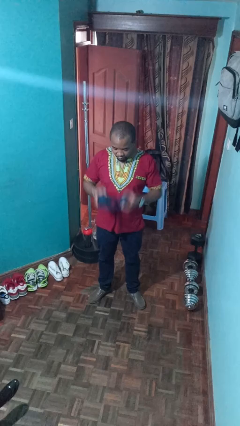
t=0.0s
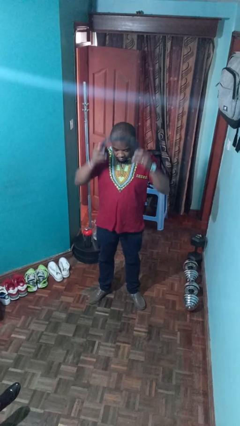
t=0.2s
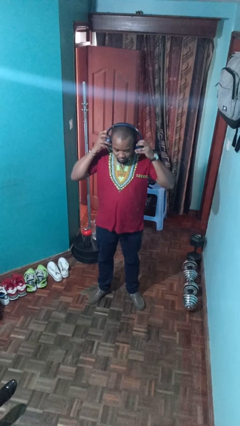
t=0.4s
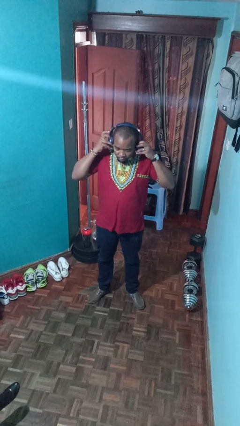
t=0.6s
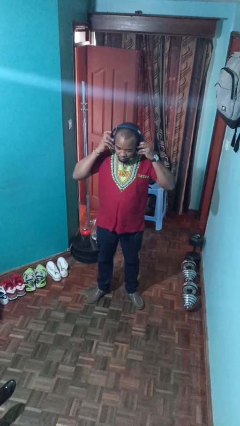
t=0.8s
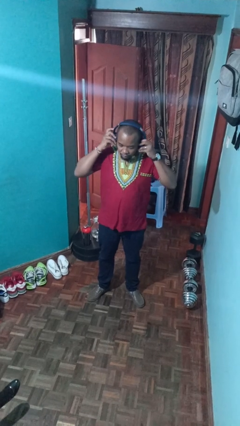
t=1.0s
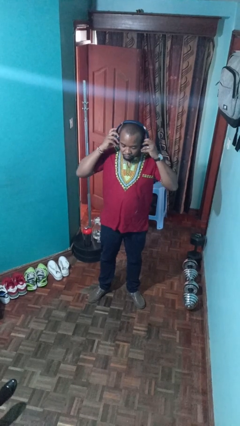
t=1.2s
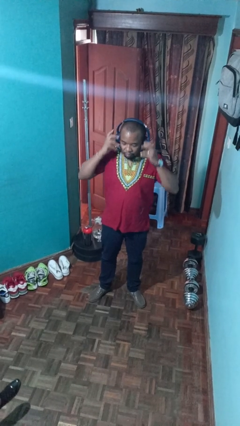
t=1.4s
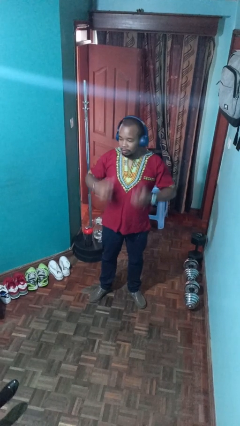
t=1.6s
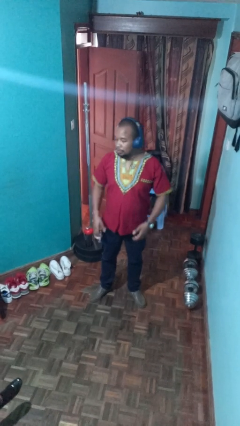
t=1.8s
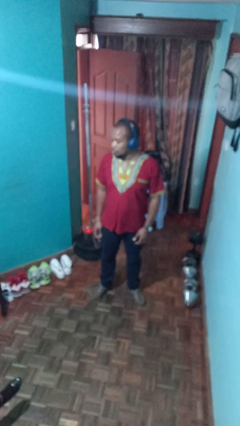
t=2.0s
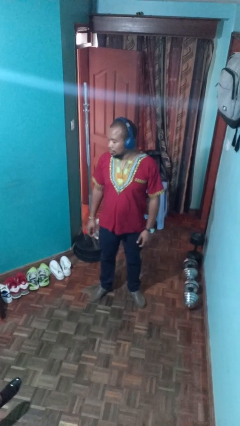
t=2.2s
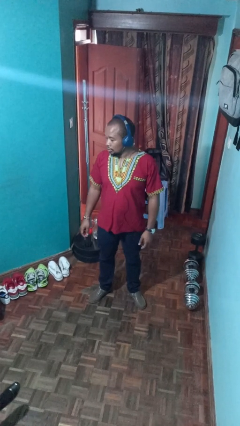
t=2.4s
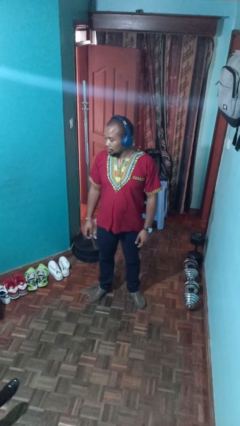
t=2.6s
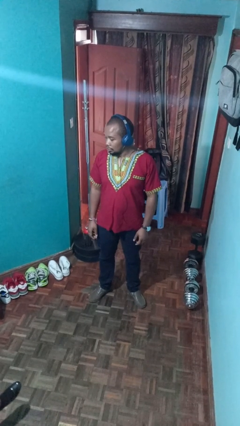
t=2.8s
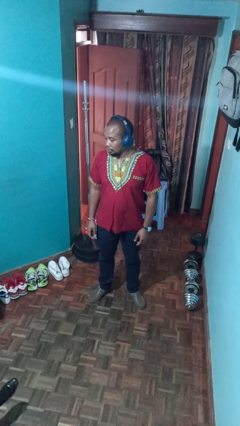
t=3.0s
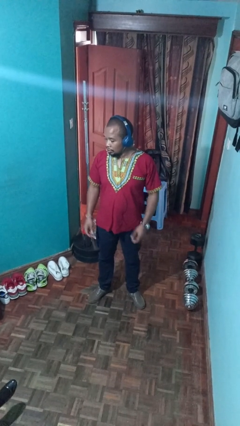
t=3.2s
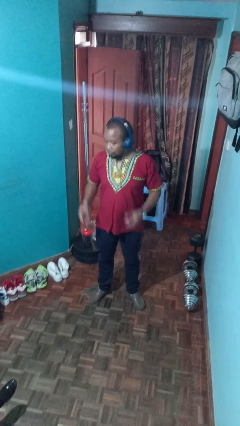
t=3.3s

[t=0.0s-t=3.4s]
person puts on headphones

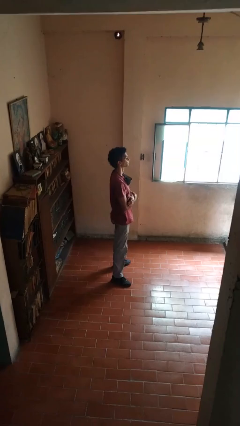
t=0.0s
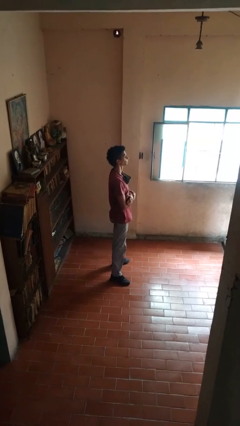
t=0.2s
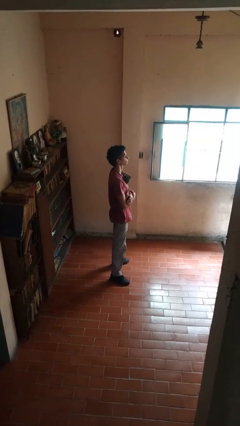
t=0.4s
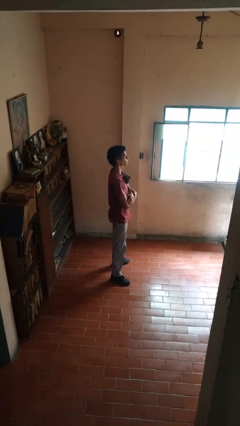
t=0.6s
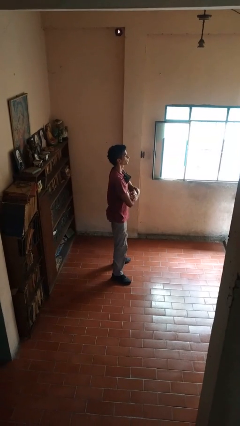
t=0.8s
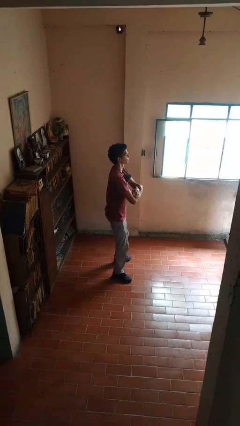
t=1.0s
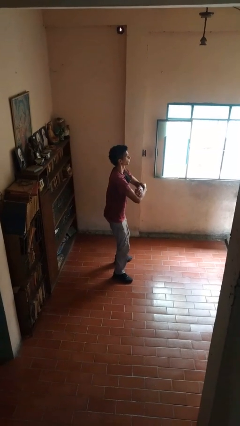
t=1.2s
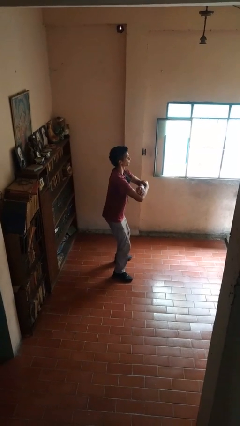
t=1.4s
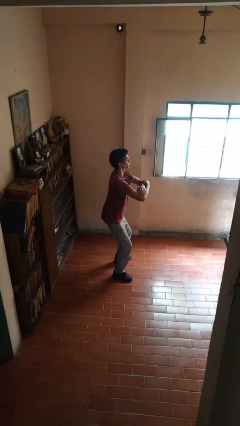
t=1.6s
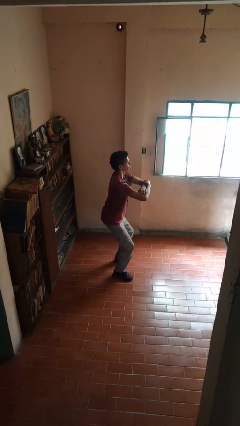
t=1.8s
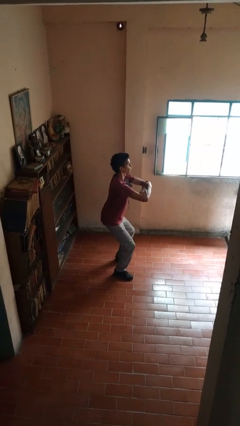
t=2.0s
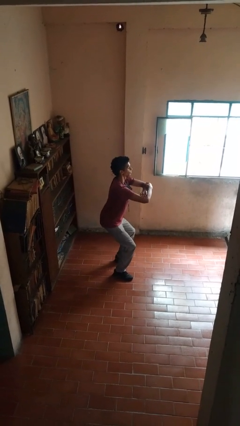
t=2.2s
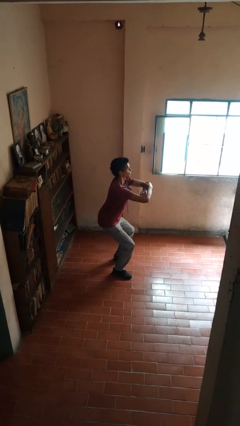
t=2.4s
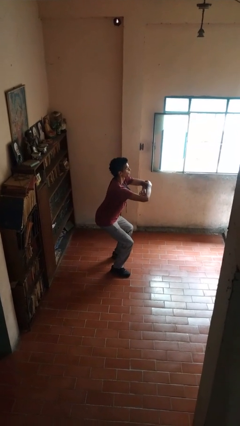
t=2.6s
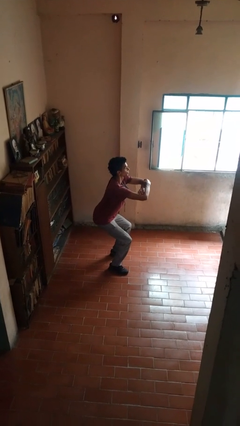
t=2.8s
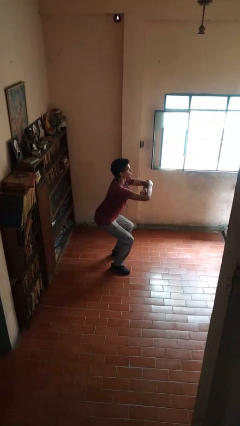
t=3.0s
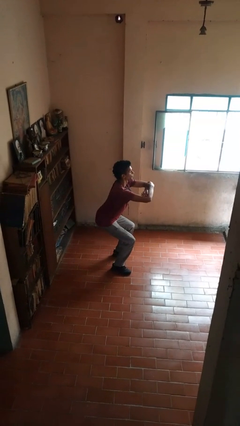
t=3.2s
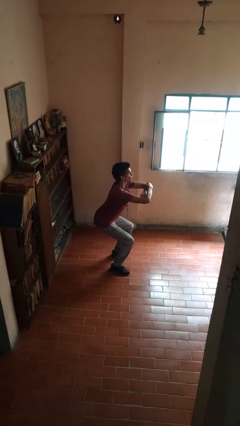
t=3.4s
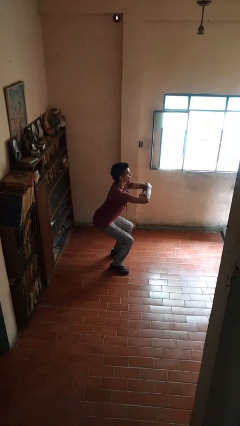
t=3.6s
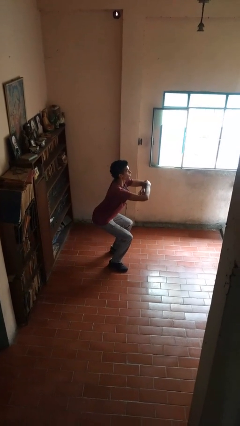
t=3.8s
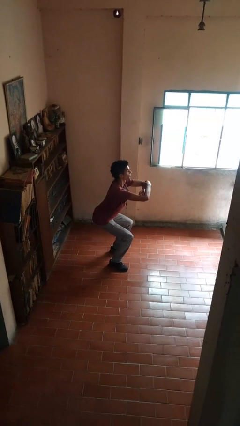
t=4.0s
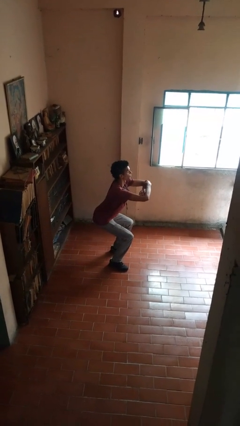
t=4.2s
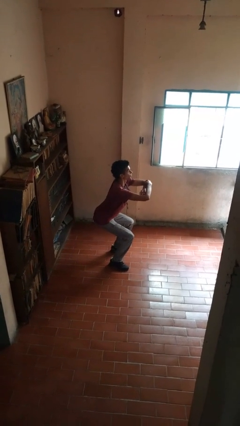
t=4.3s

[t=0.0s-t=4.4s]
person squats

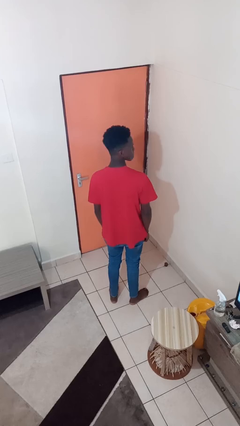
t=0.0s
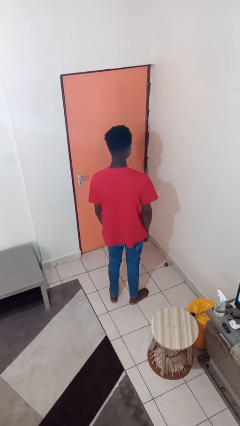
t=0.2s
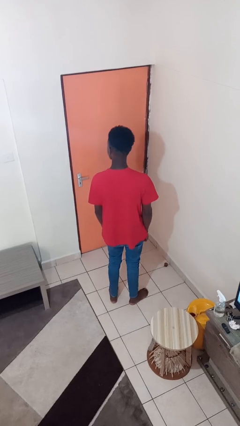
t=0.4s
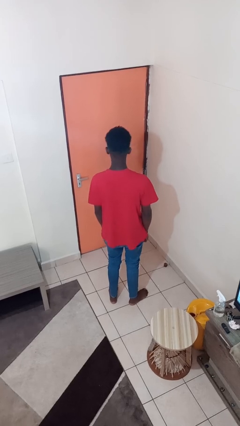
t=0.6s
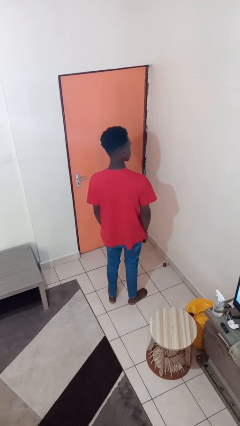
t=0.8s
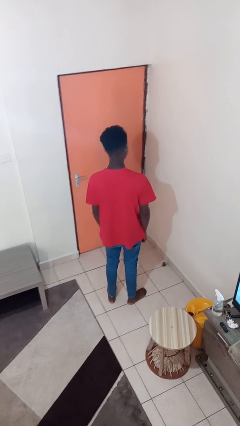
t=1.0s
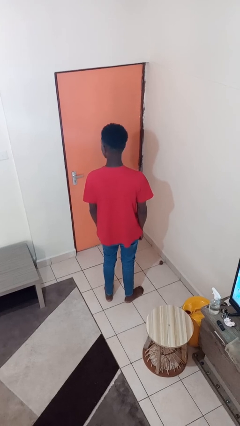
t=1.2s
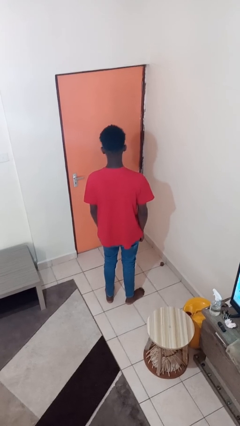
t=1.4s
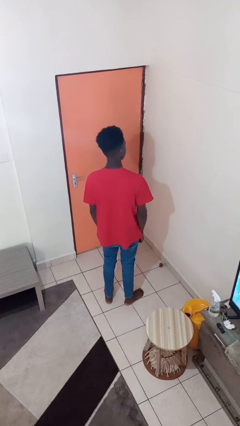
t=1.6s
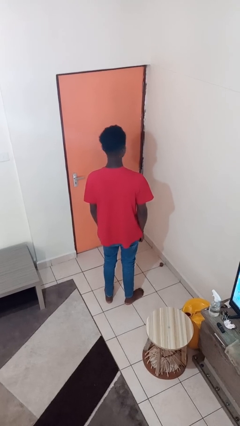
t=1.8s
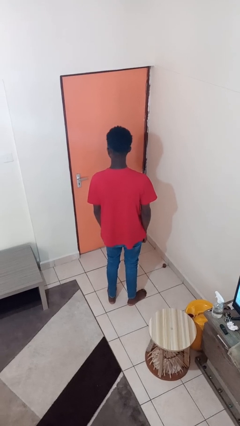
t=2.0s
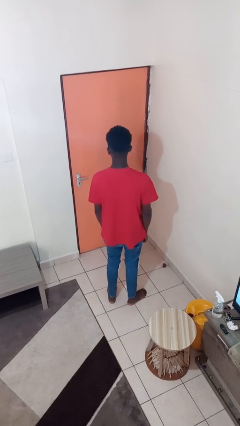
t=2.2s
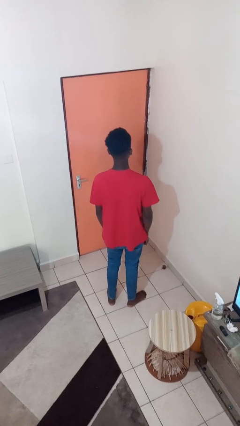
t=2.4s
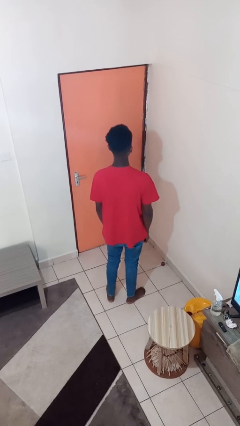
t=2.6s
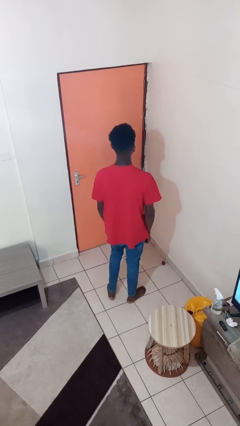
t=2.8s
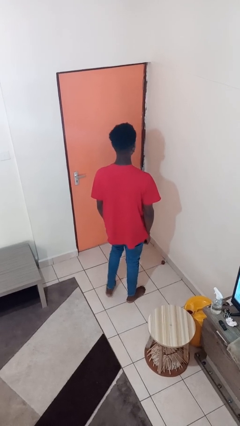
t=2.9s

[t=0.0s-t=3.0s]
person shakes head

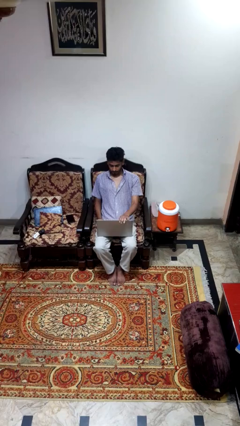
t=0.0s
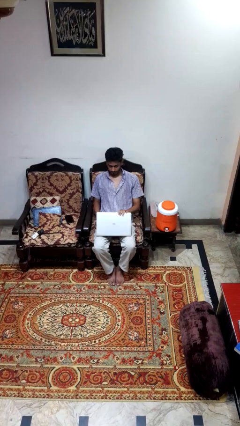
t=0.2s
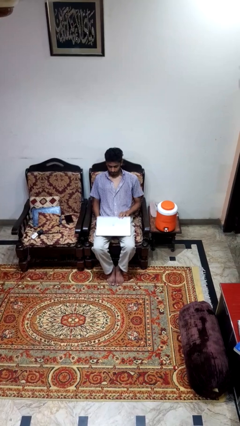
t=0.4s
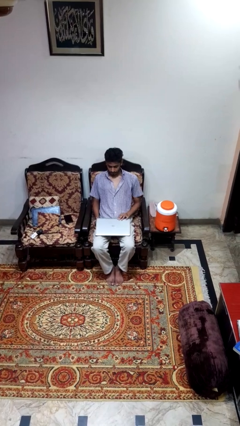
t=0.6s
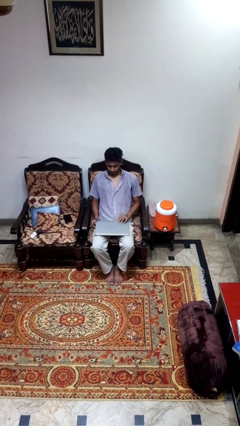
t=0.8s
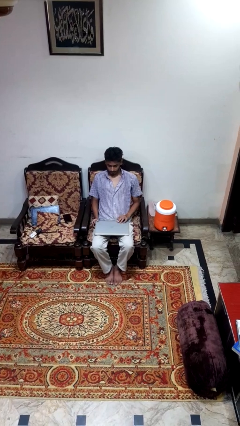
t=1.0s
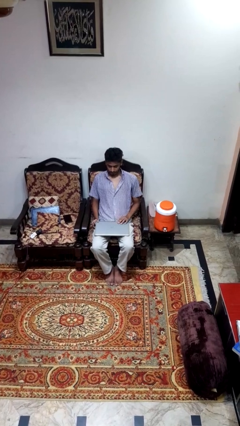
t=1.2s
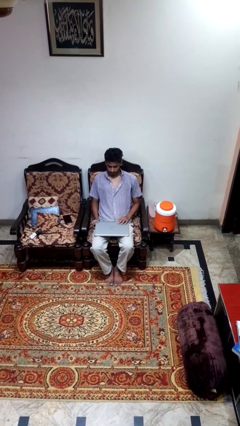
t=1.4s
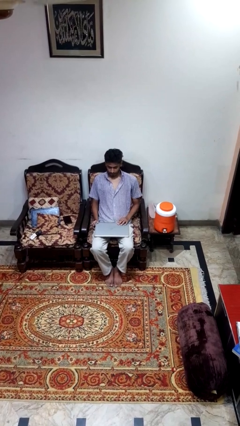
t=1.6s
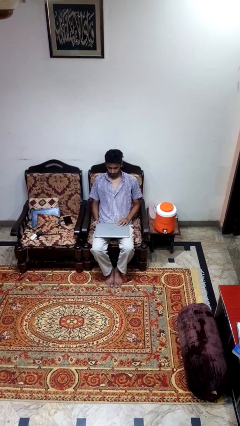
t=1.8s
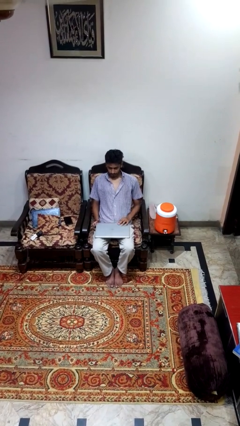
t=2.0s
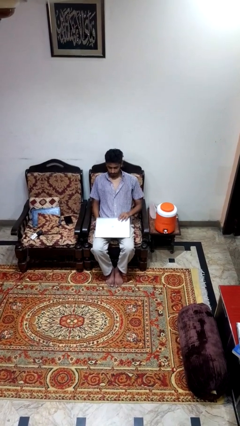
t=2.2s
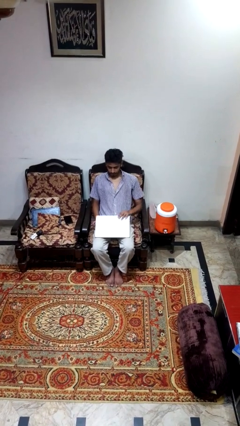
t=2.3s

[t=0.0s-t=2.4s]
person closes laptop

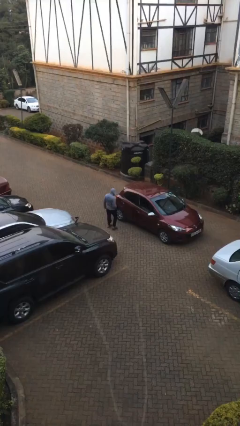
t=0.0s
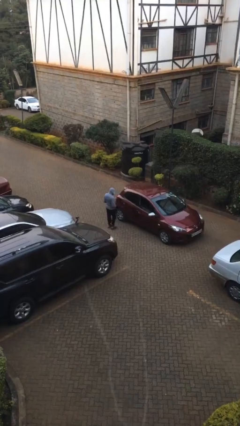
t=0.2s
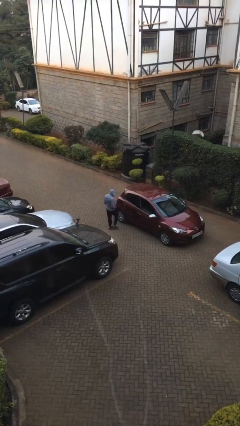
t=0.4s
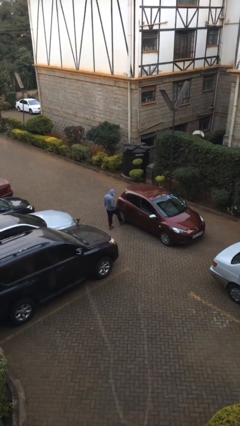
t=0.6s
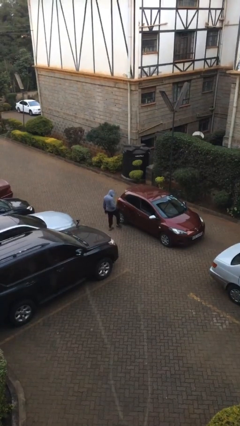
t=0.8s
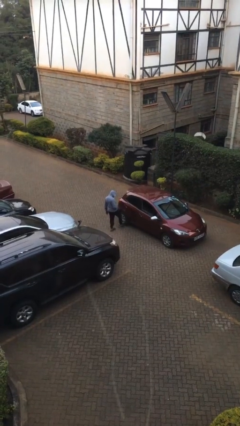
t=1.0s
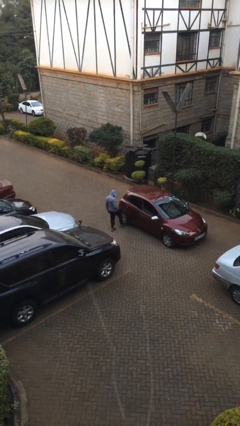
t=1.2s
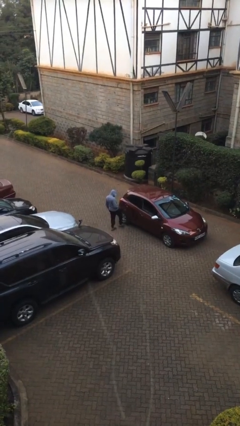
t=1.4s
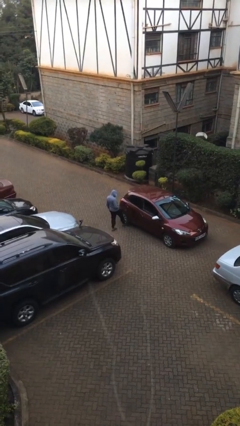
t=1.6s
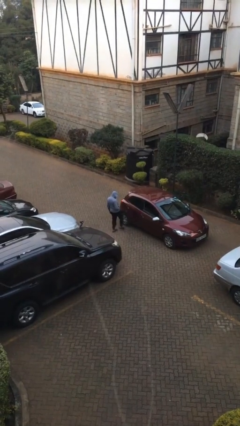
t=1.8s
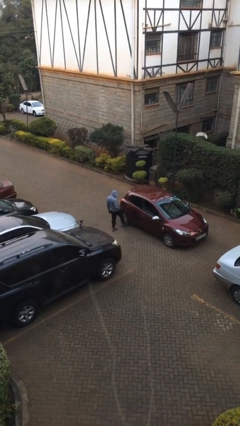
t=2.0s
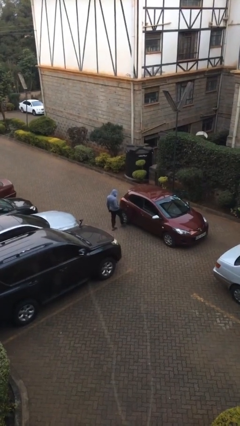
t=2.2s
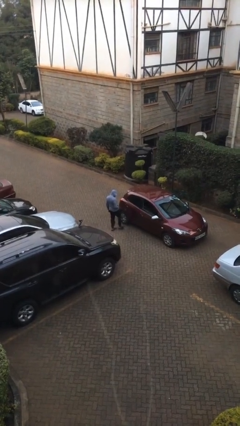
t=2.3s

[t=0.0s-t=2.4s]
person kicks car tires

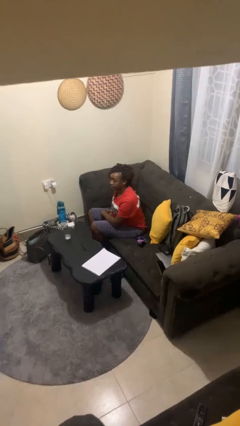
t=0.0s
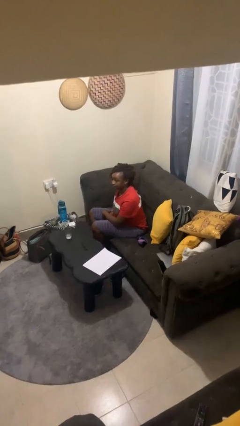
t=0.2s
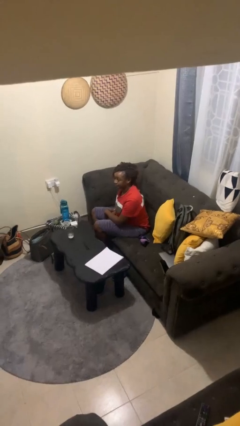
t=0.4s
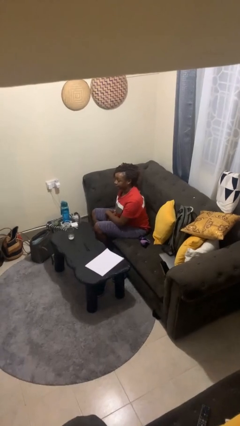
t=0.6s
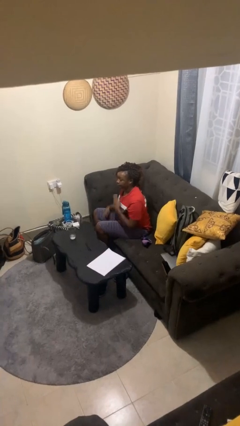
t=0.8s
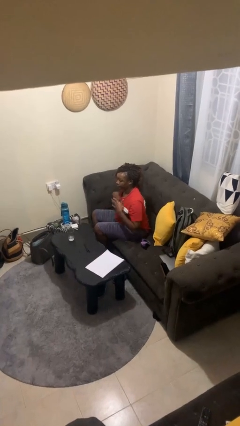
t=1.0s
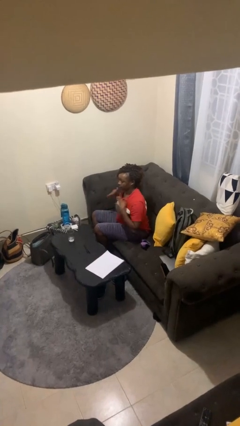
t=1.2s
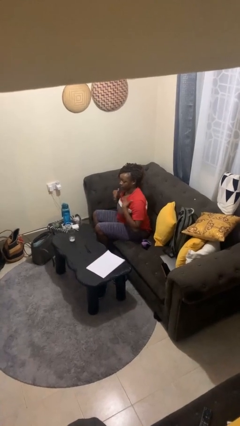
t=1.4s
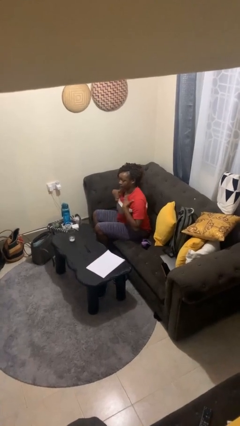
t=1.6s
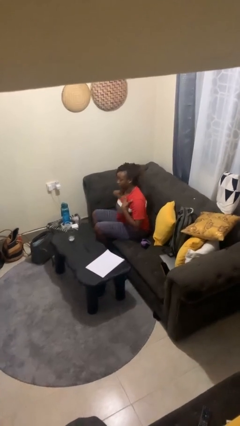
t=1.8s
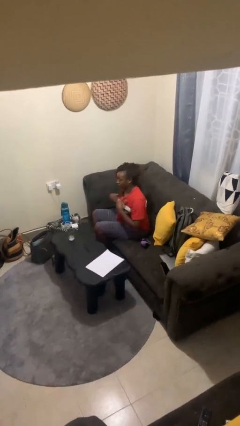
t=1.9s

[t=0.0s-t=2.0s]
person drums on chest
